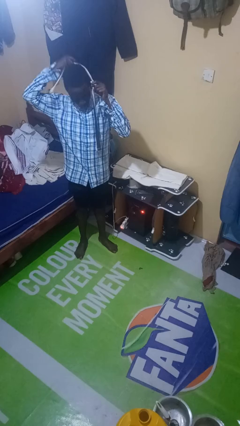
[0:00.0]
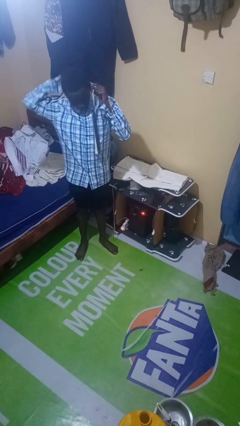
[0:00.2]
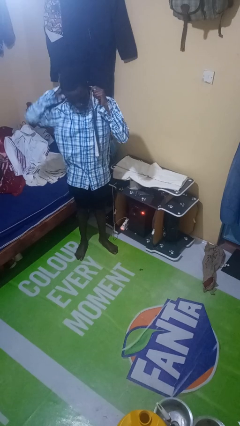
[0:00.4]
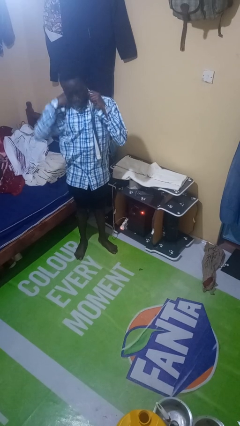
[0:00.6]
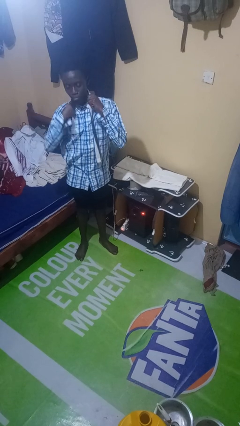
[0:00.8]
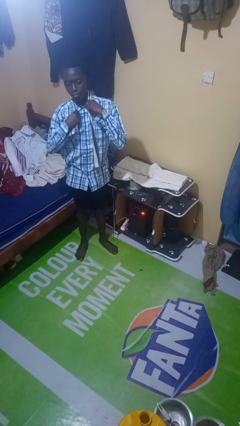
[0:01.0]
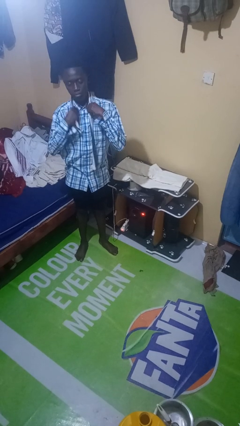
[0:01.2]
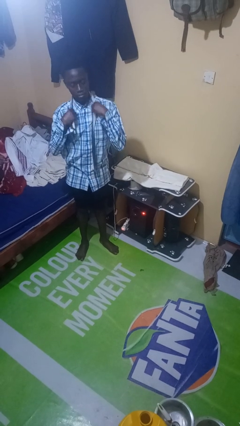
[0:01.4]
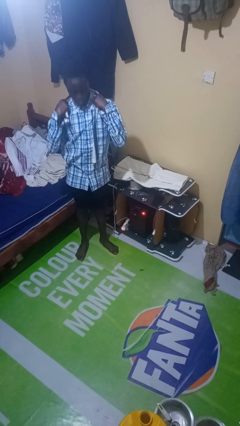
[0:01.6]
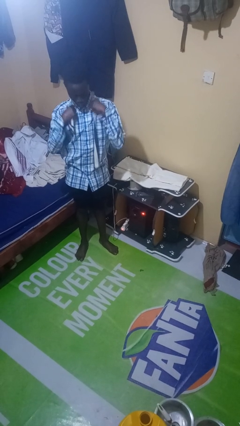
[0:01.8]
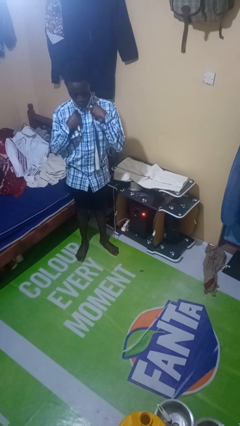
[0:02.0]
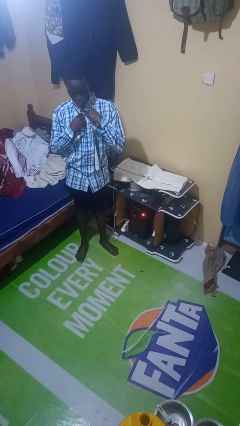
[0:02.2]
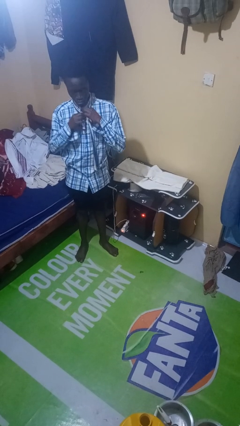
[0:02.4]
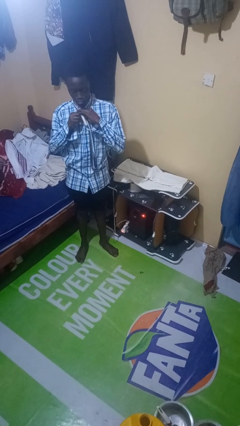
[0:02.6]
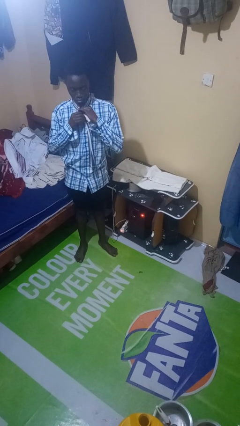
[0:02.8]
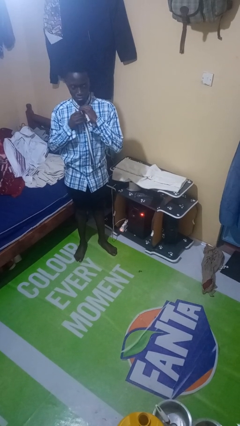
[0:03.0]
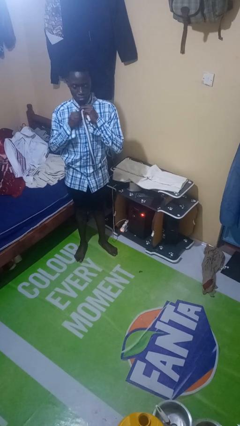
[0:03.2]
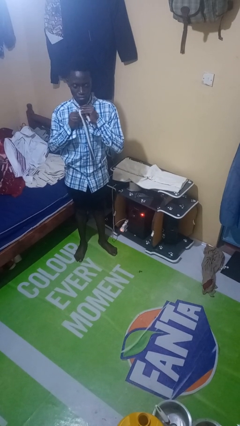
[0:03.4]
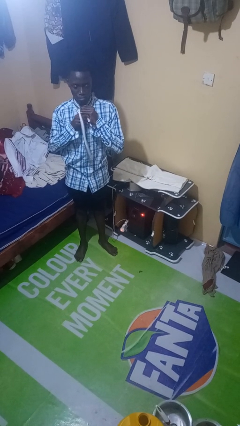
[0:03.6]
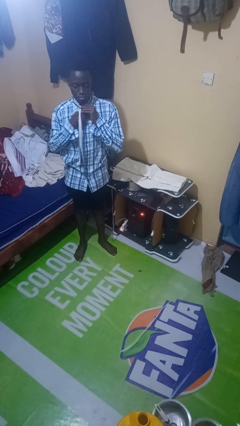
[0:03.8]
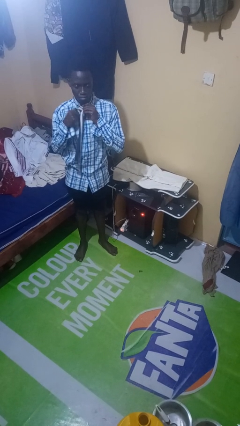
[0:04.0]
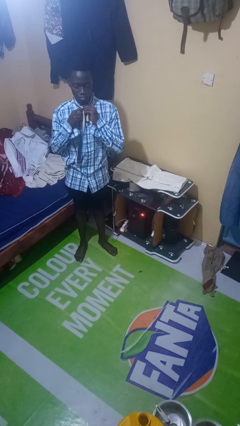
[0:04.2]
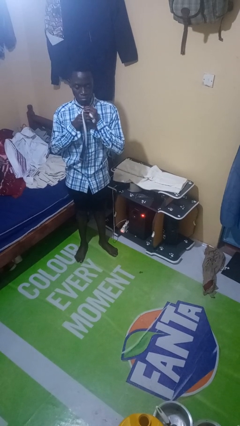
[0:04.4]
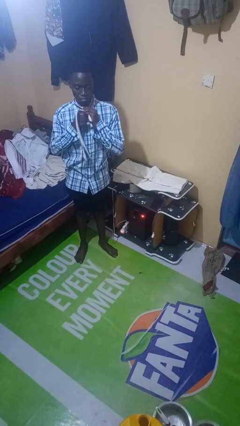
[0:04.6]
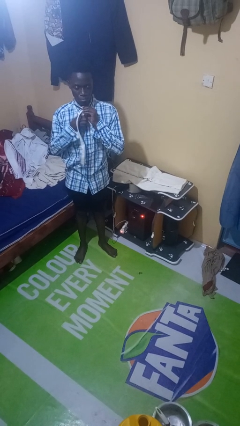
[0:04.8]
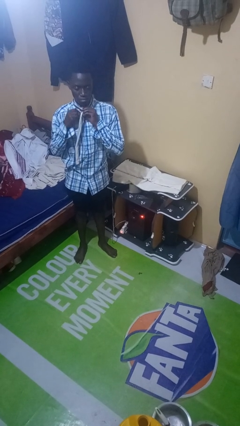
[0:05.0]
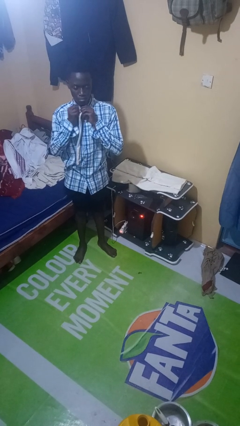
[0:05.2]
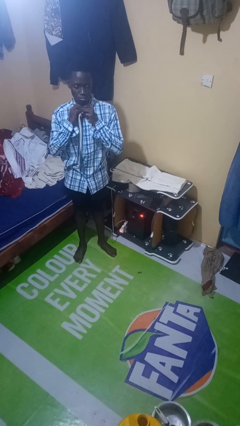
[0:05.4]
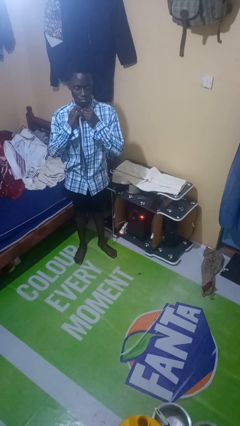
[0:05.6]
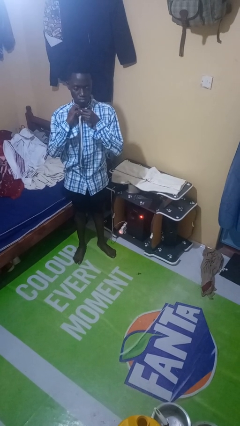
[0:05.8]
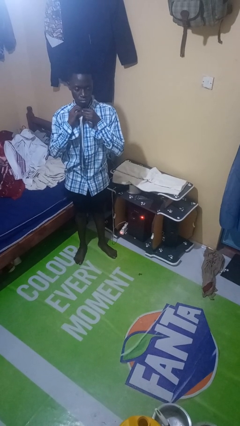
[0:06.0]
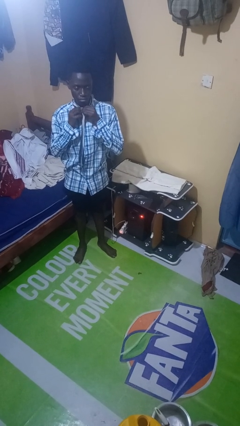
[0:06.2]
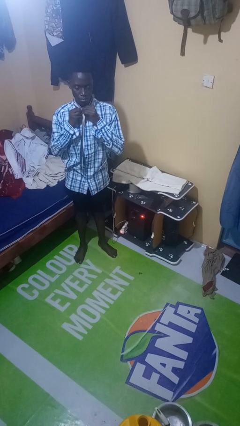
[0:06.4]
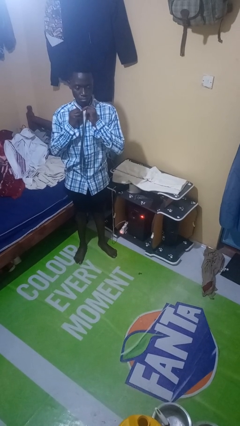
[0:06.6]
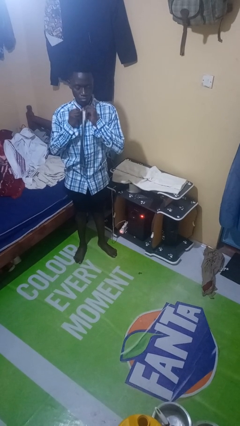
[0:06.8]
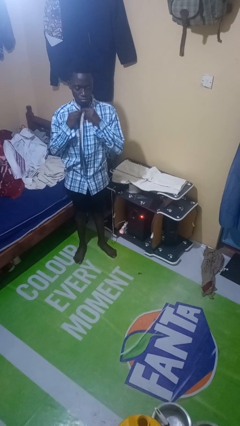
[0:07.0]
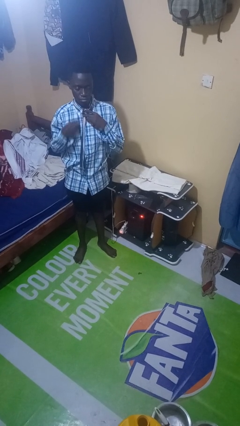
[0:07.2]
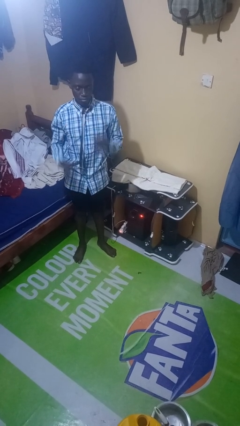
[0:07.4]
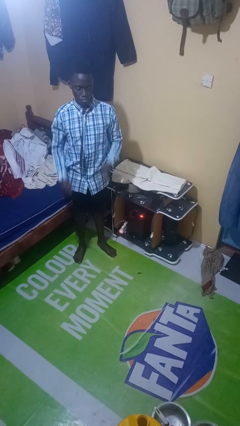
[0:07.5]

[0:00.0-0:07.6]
person puts on necktie

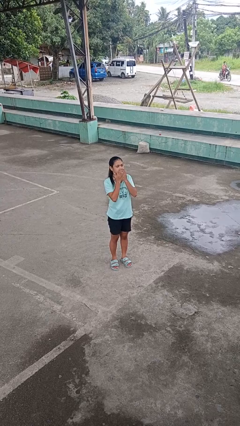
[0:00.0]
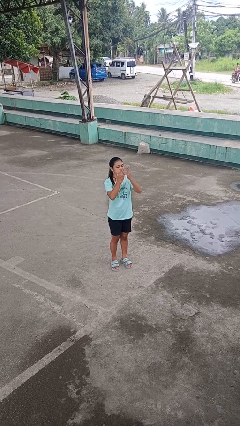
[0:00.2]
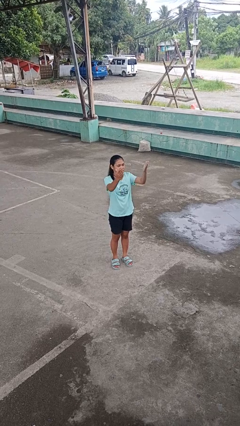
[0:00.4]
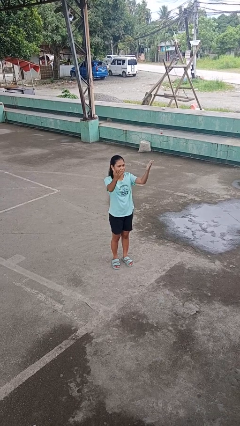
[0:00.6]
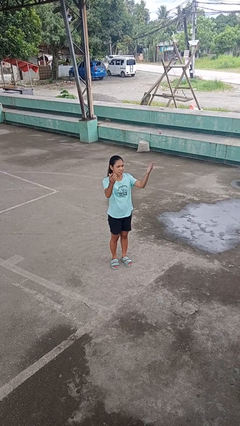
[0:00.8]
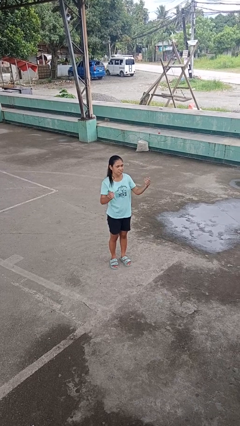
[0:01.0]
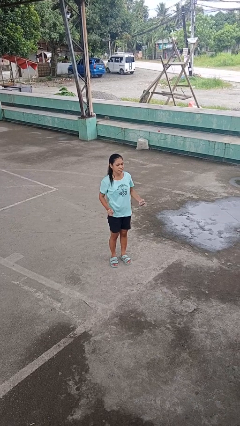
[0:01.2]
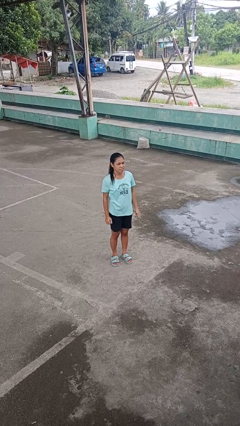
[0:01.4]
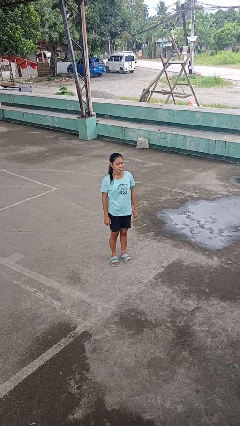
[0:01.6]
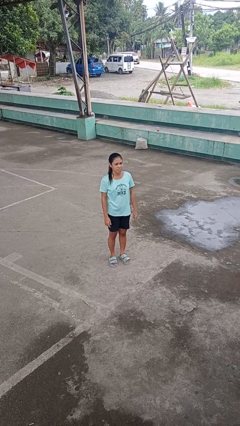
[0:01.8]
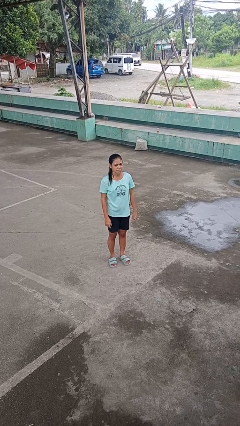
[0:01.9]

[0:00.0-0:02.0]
person gestures blow kiss

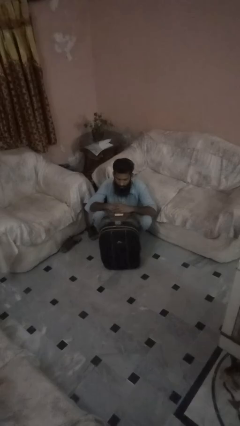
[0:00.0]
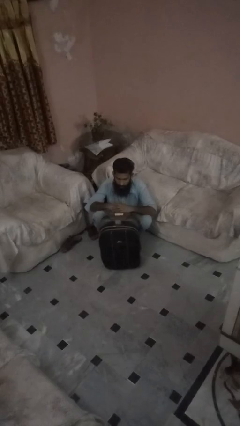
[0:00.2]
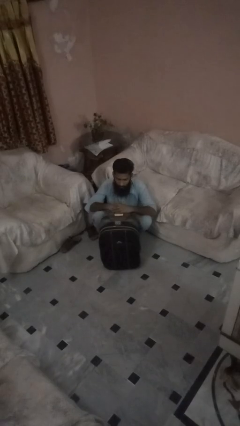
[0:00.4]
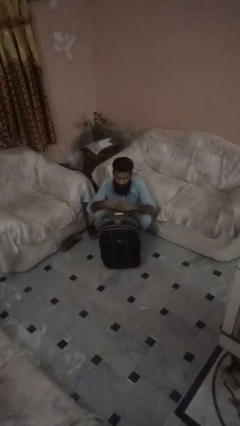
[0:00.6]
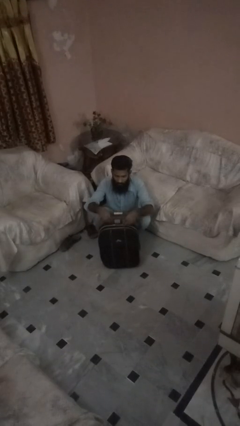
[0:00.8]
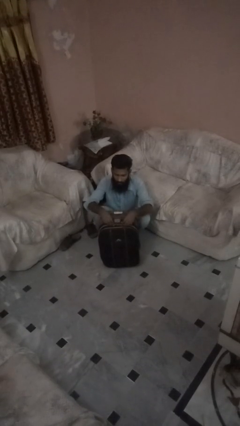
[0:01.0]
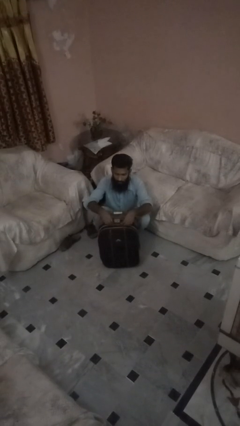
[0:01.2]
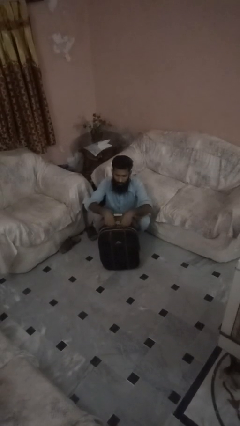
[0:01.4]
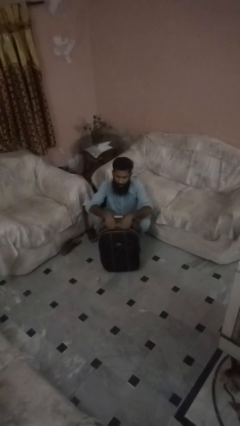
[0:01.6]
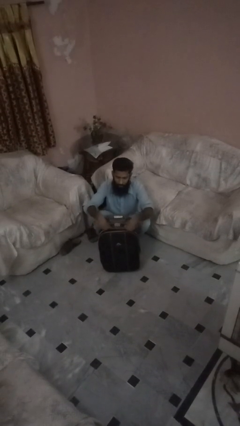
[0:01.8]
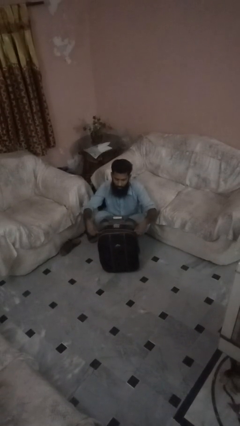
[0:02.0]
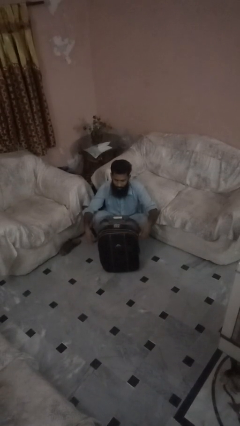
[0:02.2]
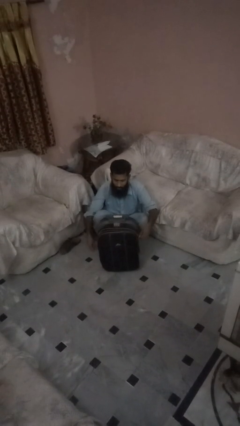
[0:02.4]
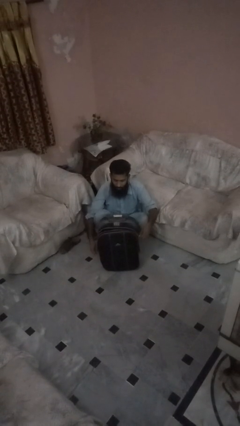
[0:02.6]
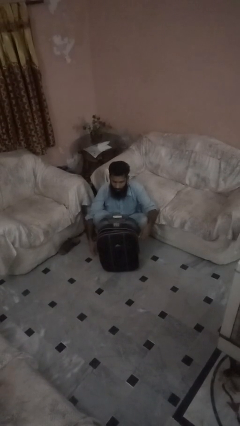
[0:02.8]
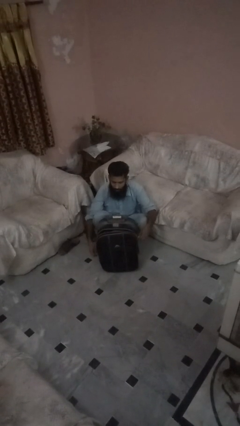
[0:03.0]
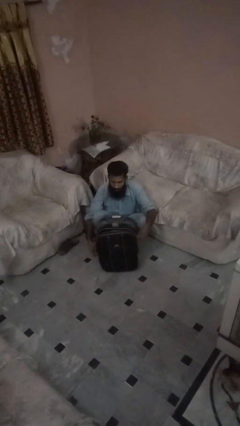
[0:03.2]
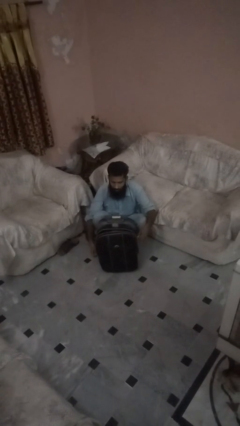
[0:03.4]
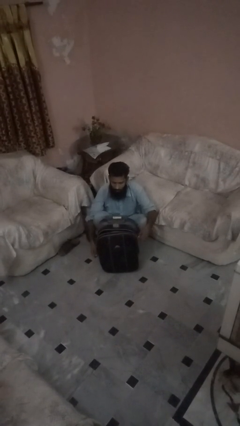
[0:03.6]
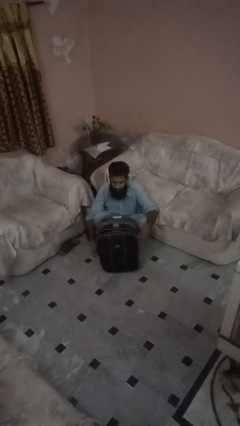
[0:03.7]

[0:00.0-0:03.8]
person opens suitcase

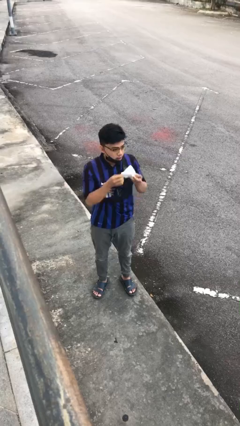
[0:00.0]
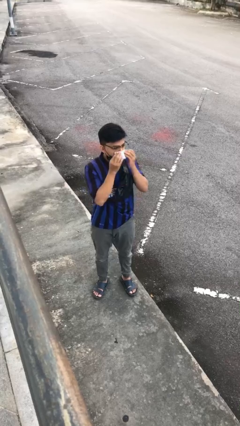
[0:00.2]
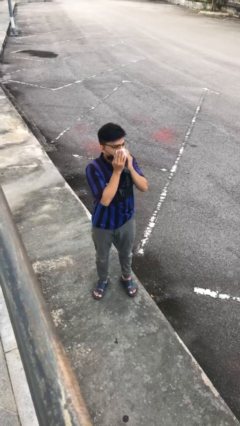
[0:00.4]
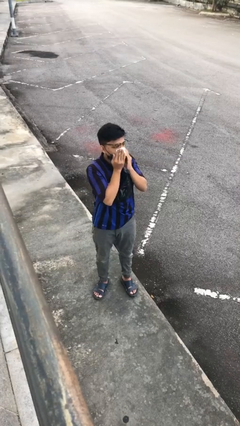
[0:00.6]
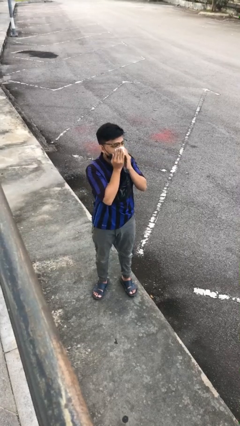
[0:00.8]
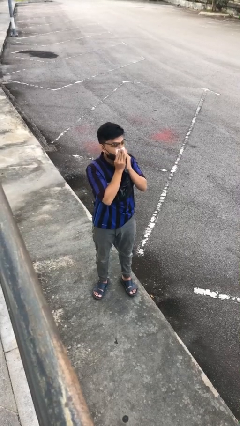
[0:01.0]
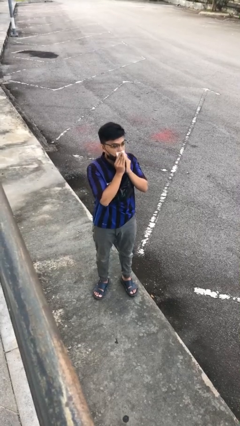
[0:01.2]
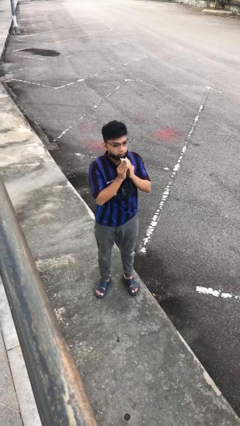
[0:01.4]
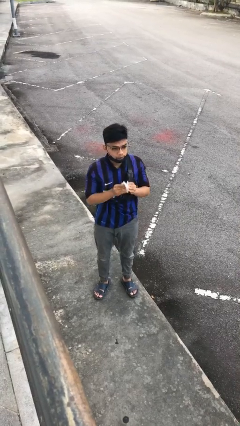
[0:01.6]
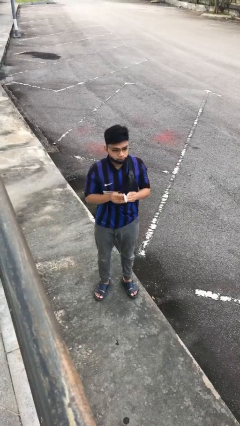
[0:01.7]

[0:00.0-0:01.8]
person blows nose

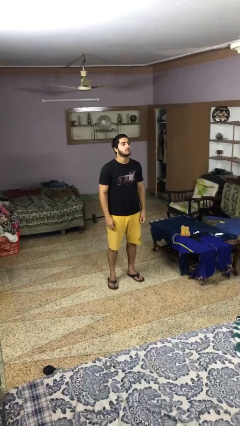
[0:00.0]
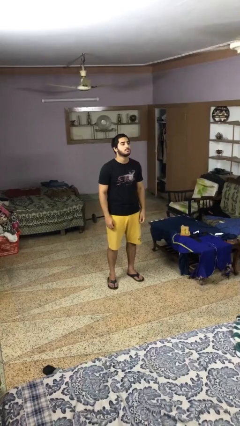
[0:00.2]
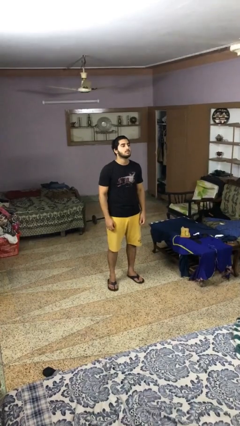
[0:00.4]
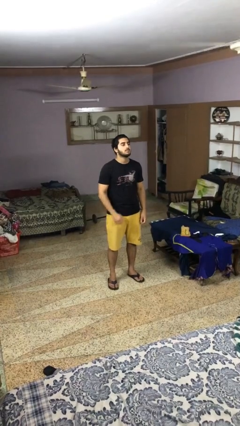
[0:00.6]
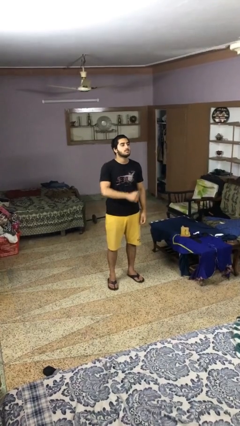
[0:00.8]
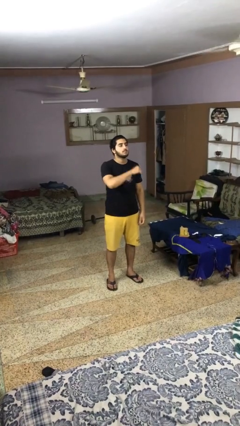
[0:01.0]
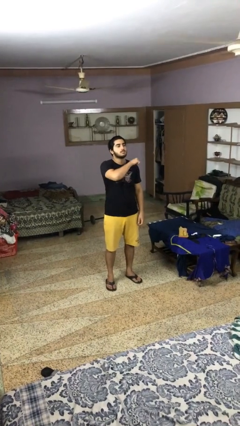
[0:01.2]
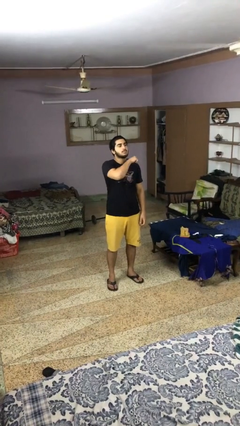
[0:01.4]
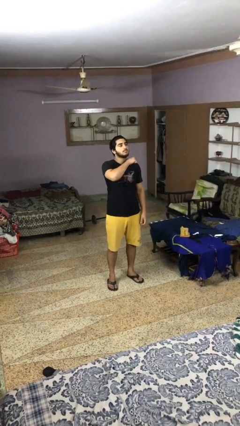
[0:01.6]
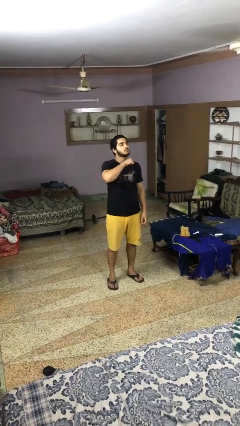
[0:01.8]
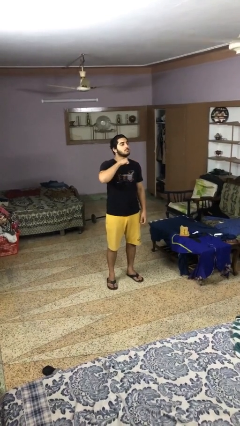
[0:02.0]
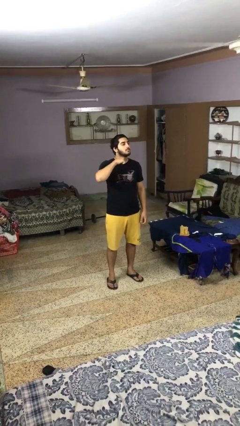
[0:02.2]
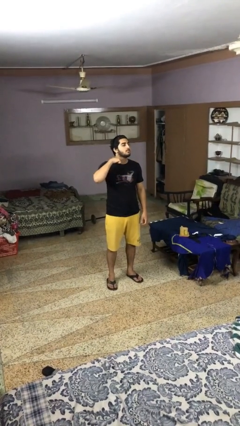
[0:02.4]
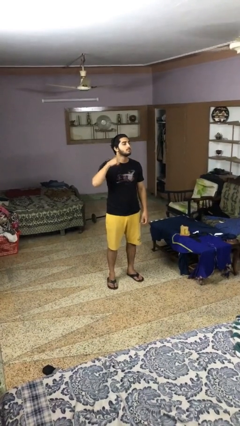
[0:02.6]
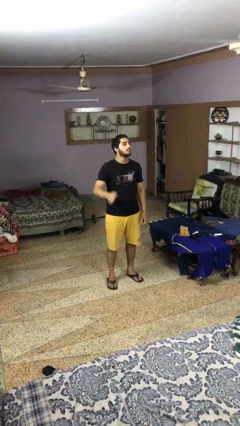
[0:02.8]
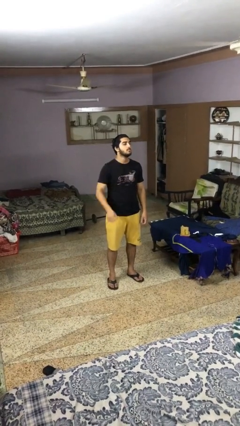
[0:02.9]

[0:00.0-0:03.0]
person gestures cut
